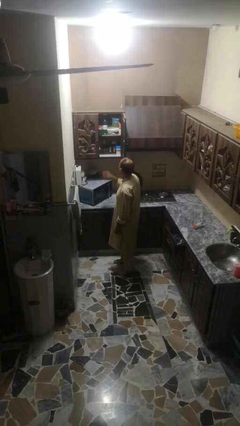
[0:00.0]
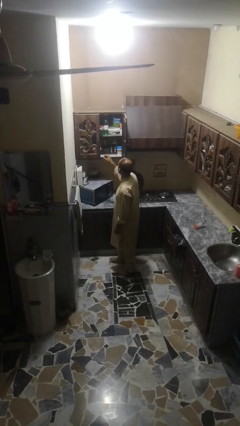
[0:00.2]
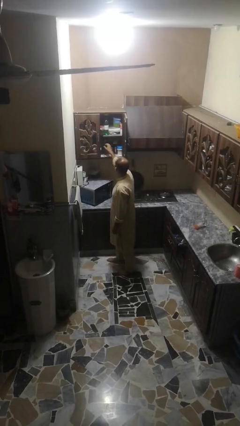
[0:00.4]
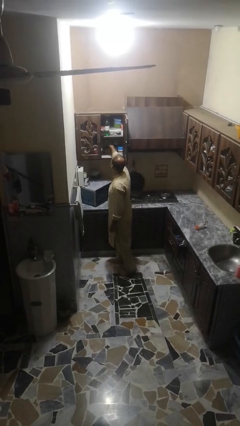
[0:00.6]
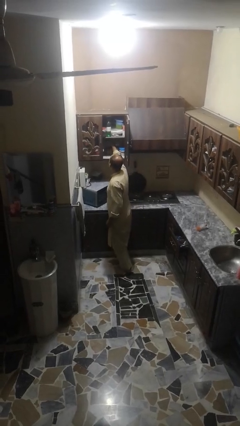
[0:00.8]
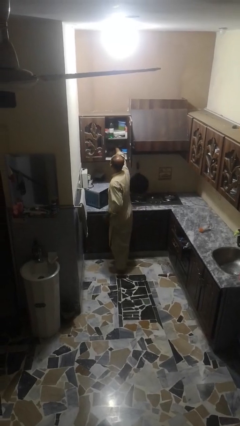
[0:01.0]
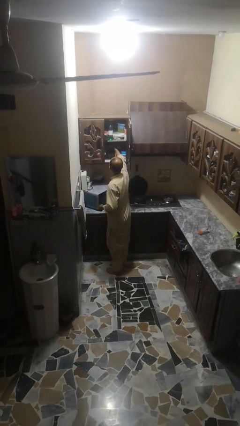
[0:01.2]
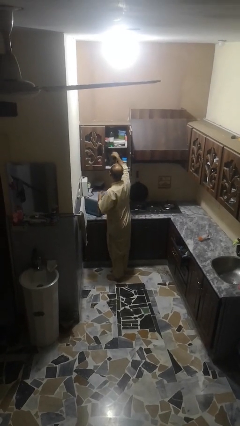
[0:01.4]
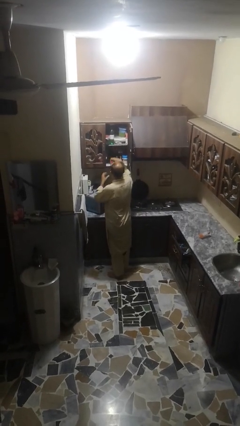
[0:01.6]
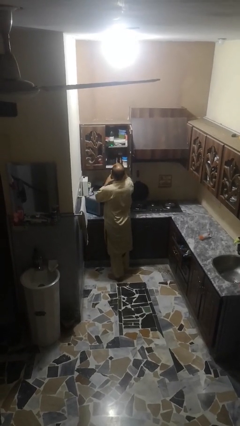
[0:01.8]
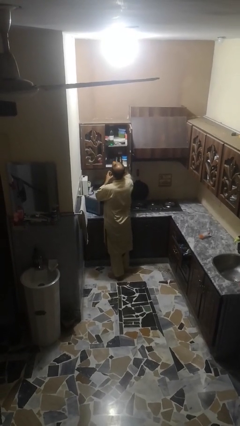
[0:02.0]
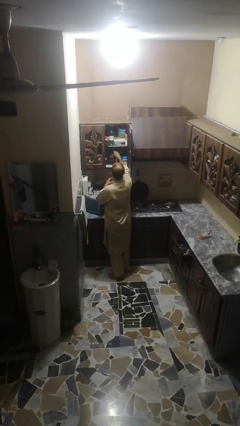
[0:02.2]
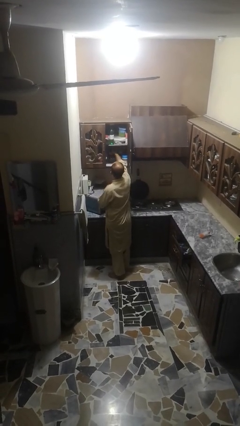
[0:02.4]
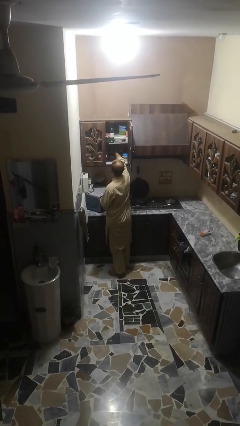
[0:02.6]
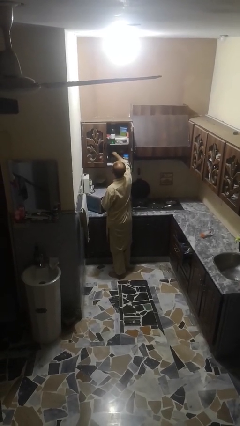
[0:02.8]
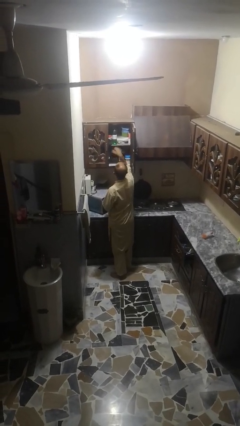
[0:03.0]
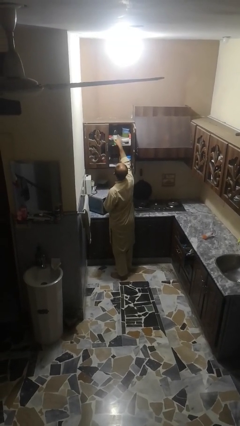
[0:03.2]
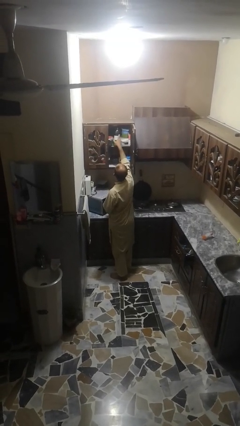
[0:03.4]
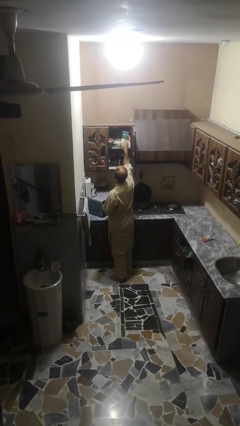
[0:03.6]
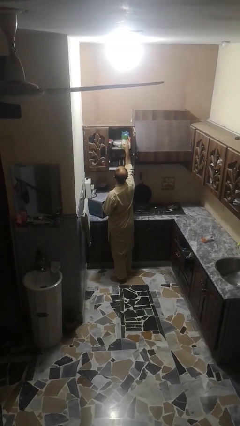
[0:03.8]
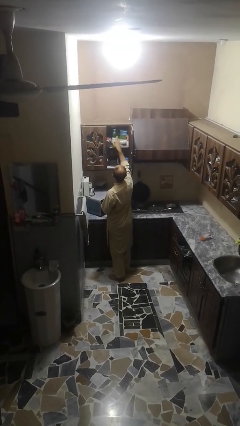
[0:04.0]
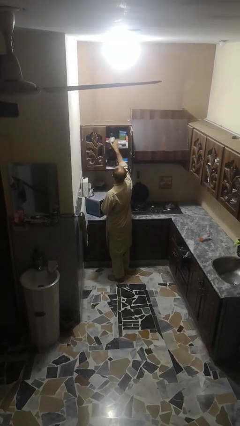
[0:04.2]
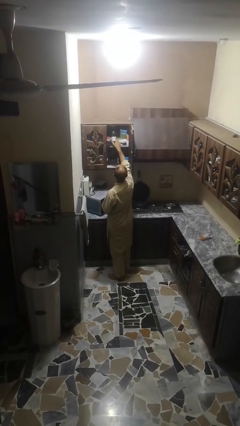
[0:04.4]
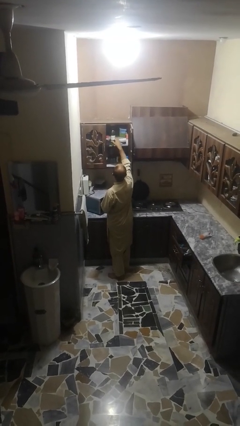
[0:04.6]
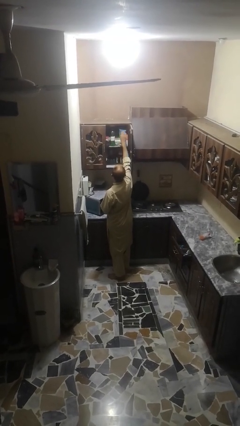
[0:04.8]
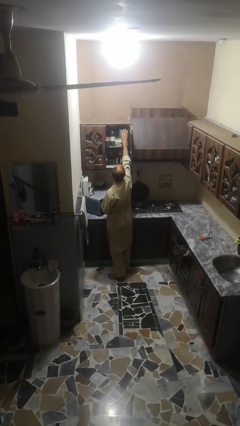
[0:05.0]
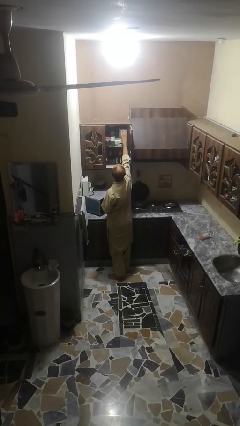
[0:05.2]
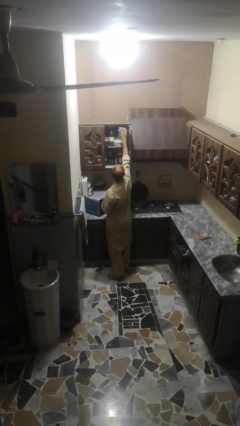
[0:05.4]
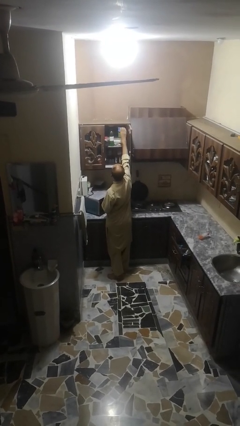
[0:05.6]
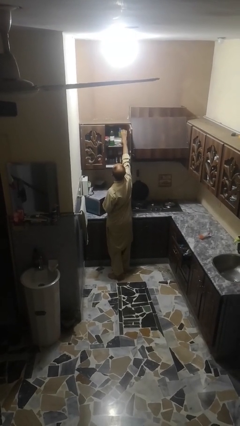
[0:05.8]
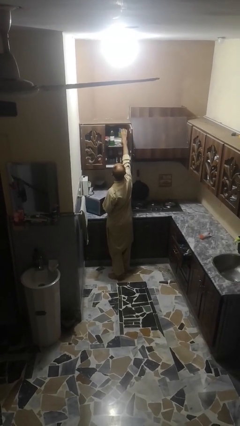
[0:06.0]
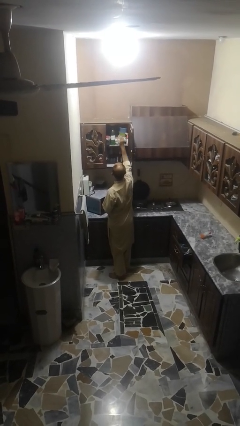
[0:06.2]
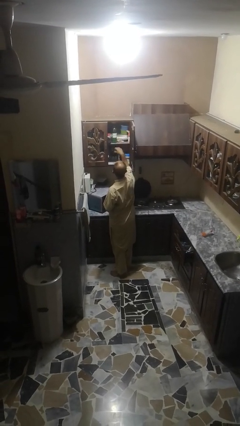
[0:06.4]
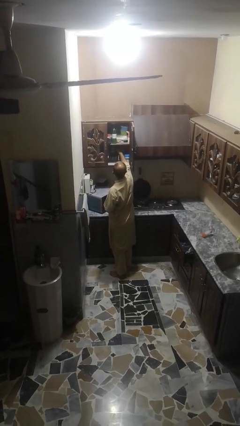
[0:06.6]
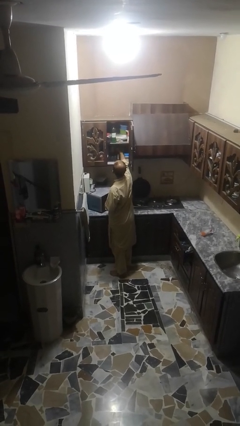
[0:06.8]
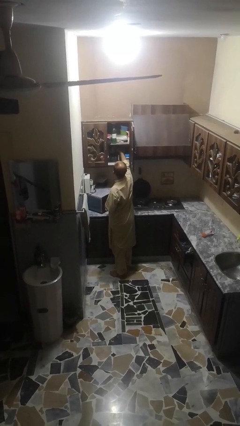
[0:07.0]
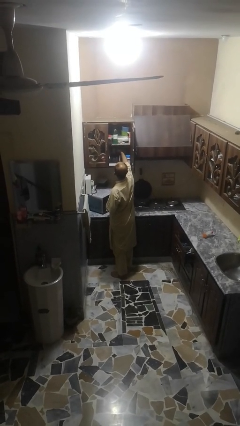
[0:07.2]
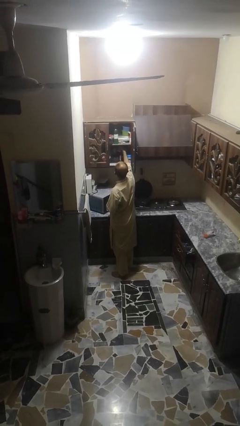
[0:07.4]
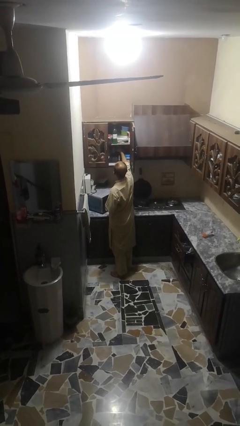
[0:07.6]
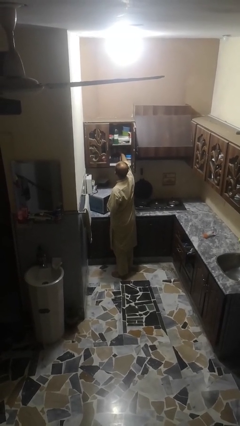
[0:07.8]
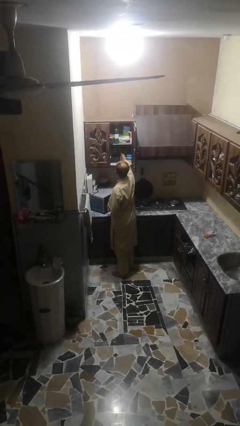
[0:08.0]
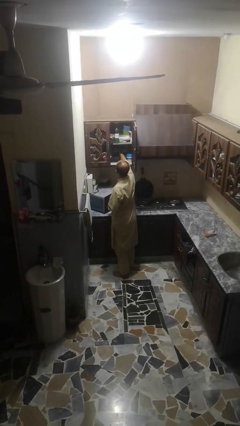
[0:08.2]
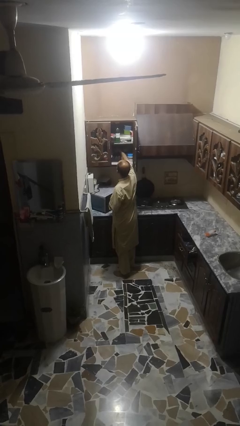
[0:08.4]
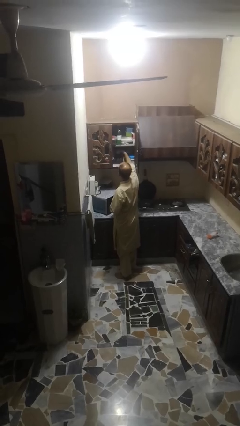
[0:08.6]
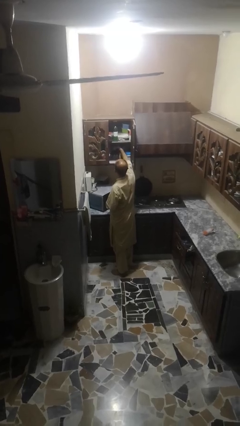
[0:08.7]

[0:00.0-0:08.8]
person searches in cabinet

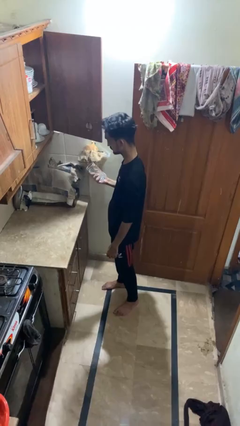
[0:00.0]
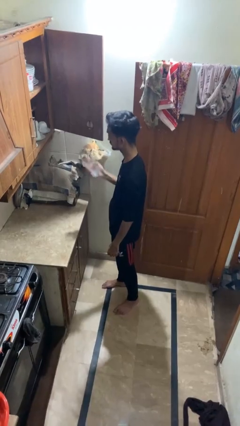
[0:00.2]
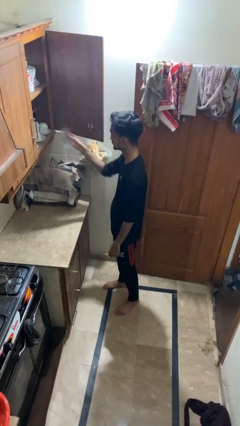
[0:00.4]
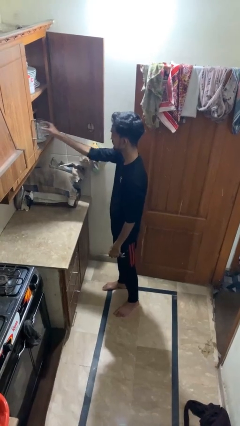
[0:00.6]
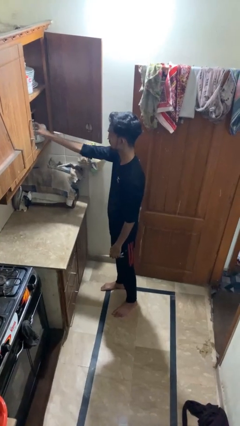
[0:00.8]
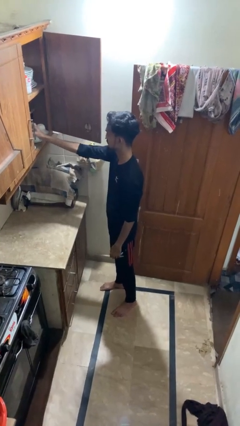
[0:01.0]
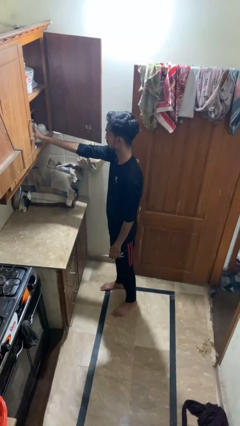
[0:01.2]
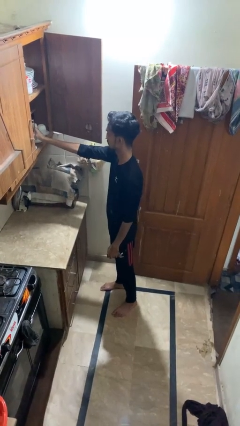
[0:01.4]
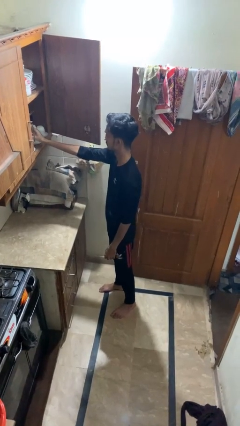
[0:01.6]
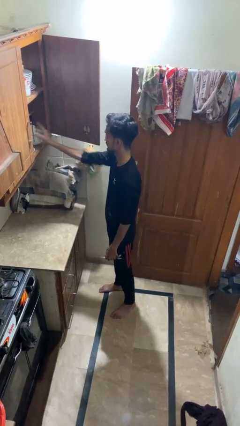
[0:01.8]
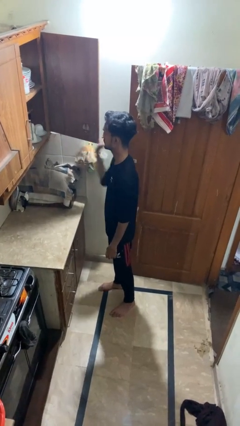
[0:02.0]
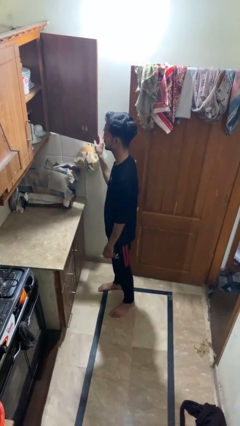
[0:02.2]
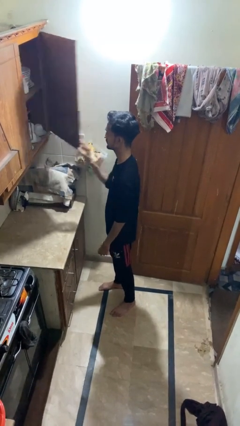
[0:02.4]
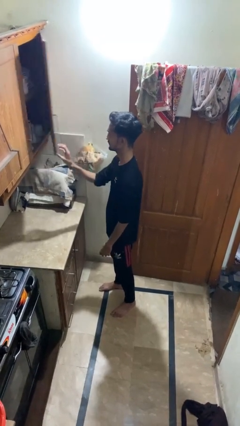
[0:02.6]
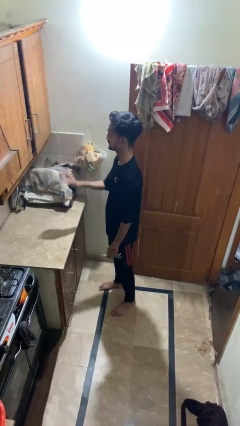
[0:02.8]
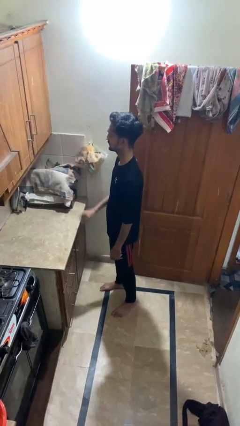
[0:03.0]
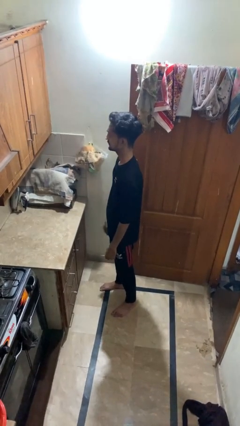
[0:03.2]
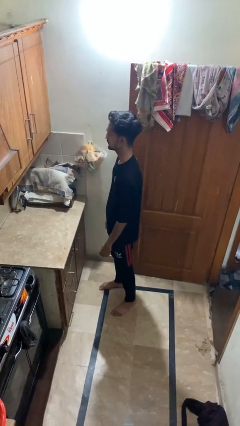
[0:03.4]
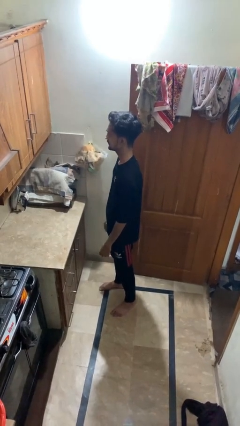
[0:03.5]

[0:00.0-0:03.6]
person takes object from cabinet

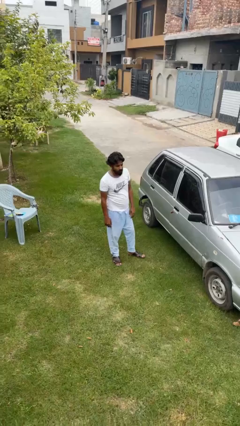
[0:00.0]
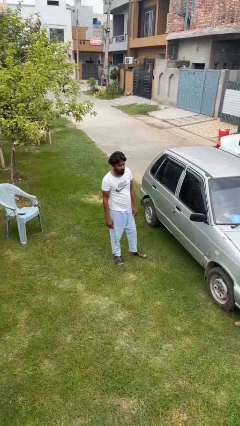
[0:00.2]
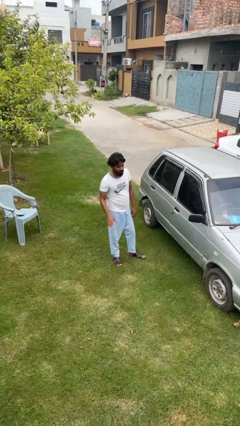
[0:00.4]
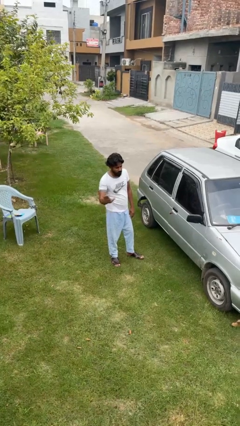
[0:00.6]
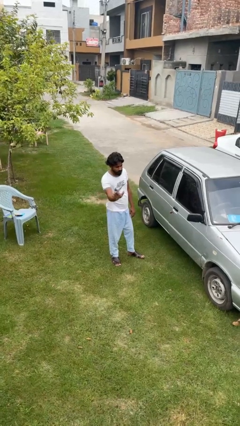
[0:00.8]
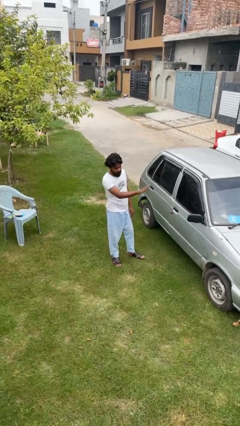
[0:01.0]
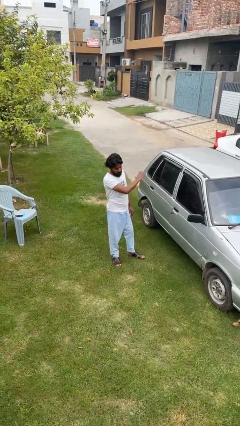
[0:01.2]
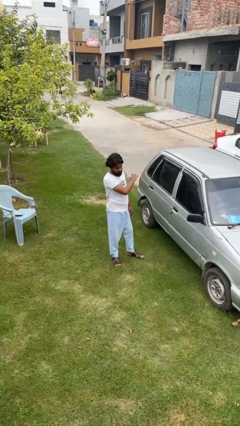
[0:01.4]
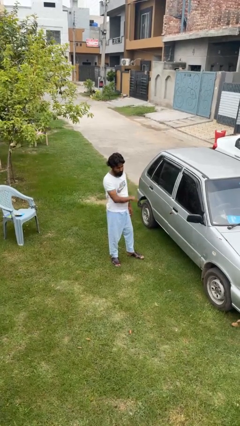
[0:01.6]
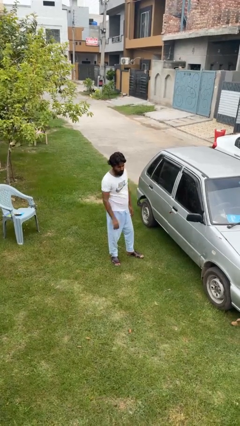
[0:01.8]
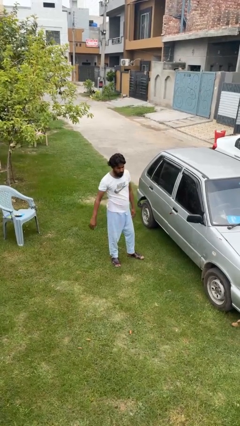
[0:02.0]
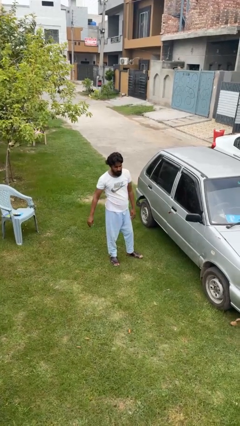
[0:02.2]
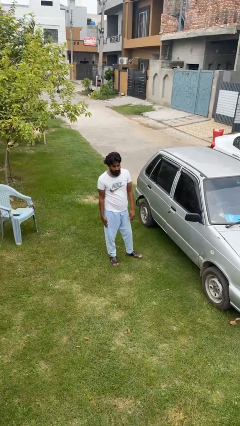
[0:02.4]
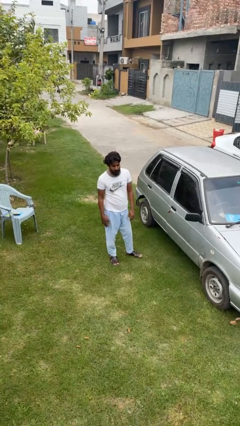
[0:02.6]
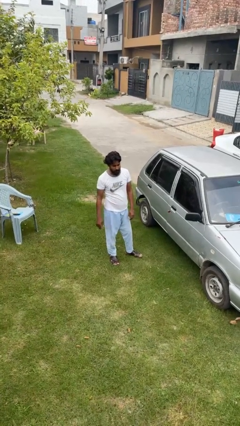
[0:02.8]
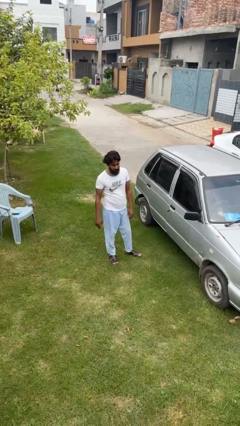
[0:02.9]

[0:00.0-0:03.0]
person gestures swipe left

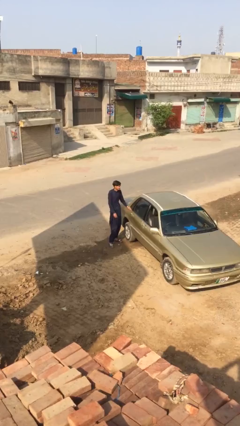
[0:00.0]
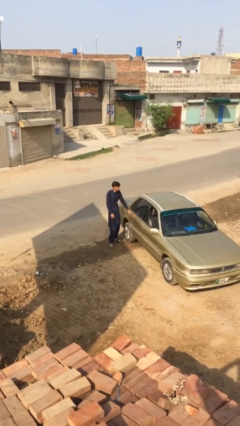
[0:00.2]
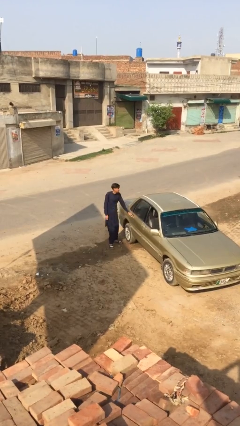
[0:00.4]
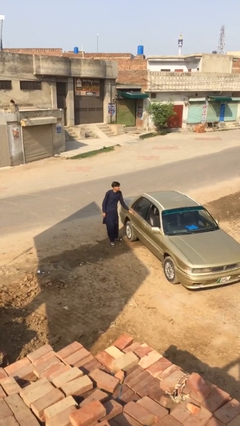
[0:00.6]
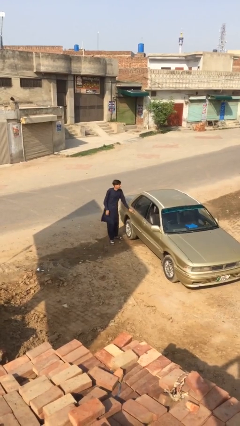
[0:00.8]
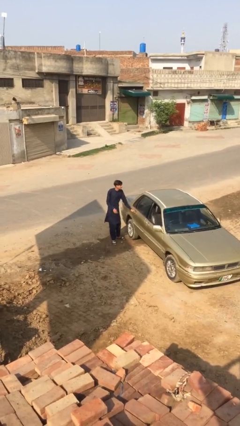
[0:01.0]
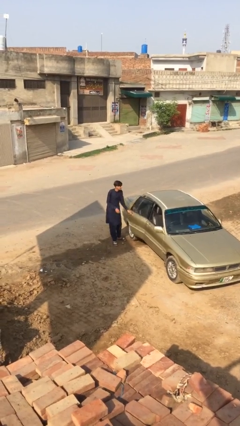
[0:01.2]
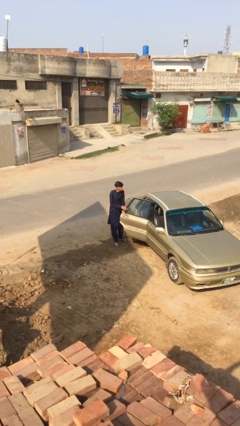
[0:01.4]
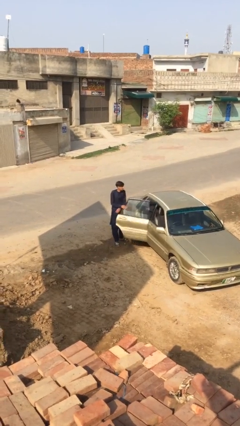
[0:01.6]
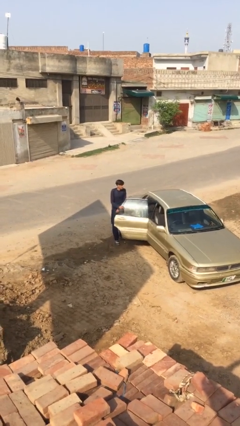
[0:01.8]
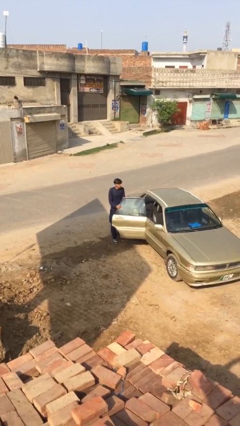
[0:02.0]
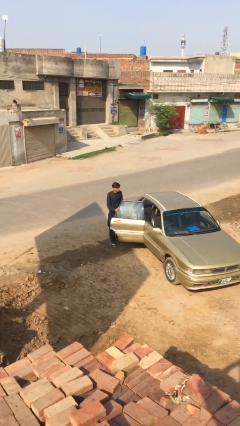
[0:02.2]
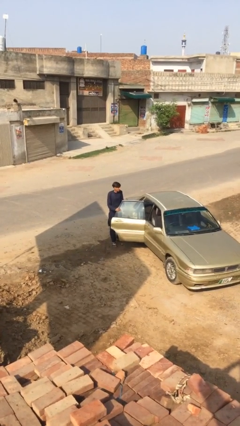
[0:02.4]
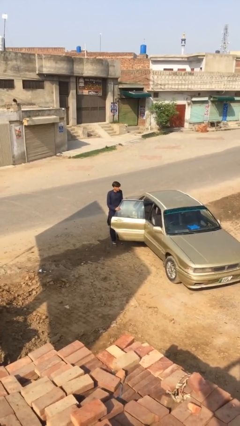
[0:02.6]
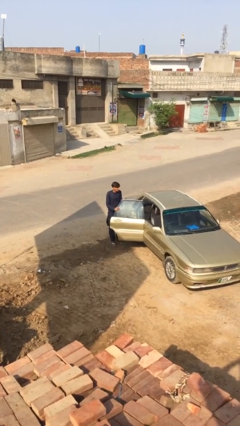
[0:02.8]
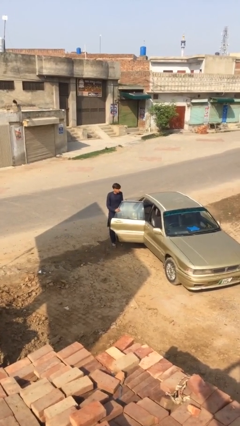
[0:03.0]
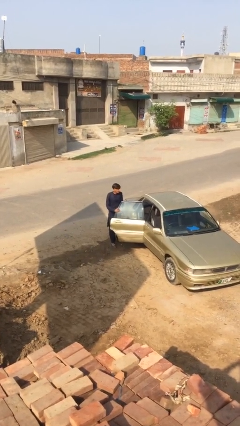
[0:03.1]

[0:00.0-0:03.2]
person opens car door
